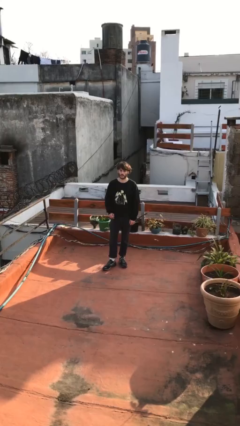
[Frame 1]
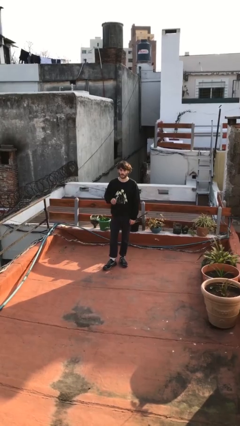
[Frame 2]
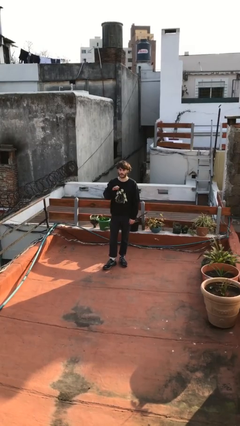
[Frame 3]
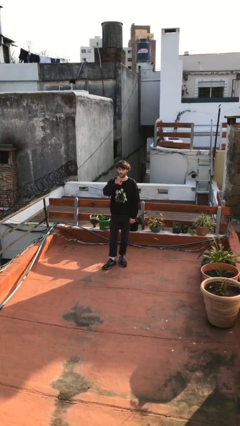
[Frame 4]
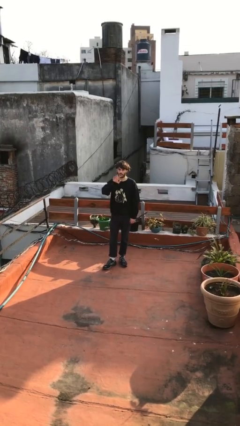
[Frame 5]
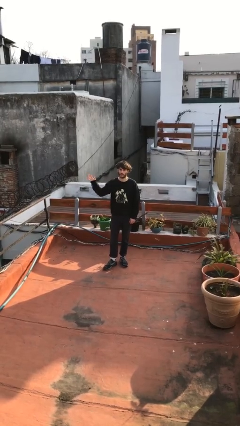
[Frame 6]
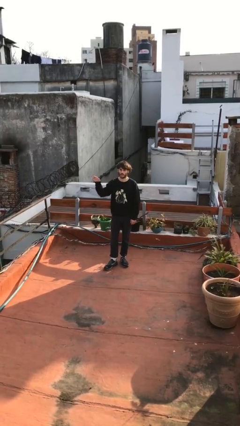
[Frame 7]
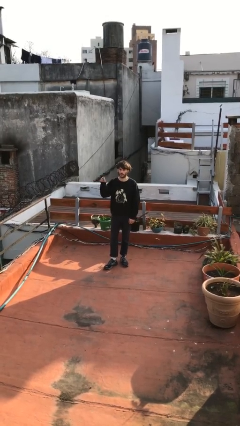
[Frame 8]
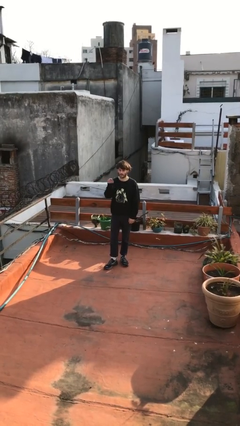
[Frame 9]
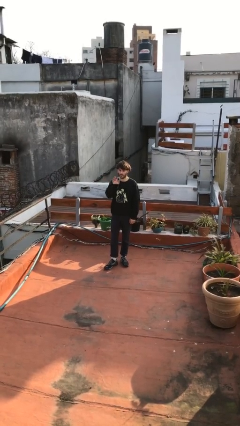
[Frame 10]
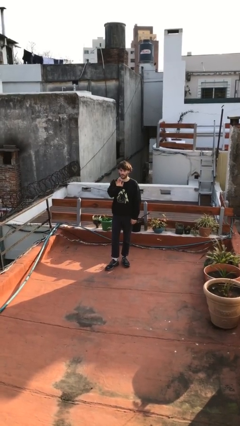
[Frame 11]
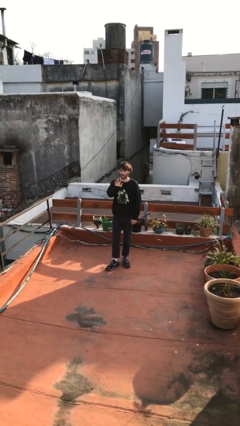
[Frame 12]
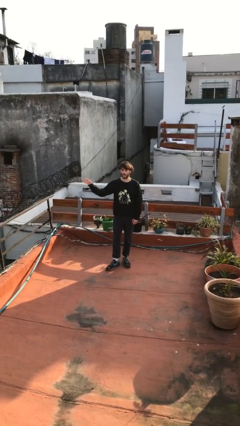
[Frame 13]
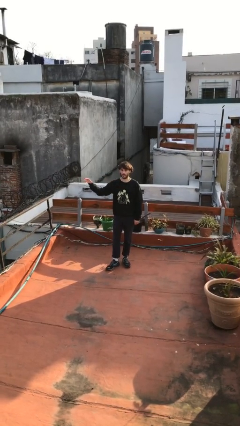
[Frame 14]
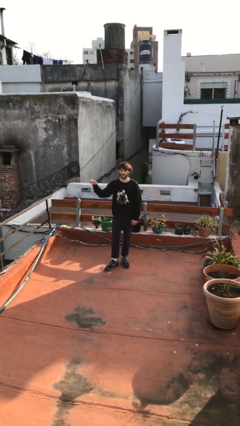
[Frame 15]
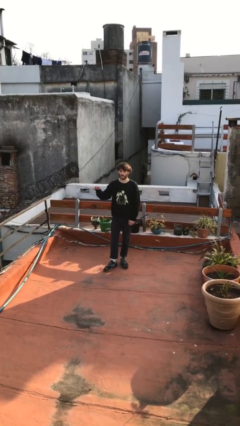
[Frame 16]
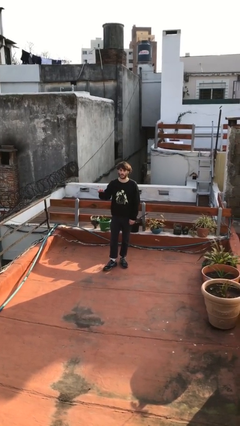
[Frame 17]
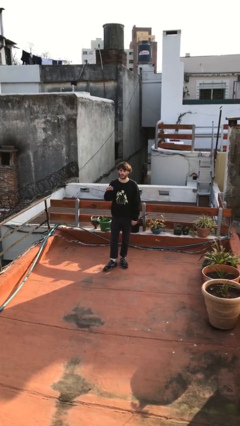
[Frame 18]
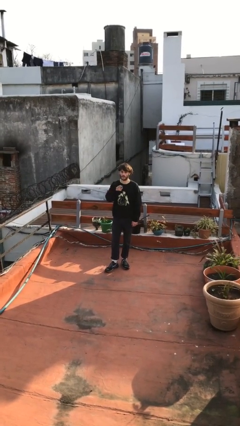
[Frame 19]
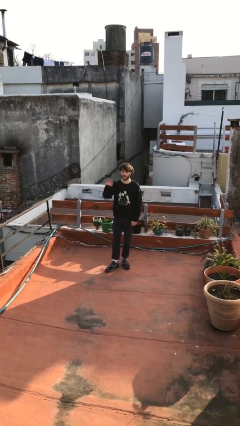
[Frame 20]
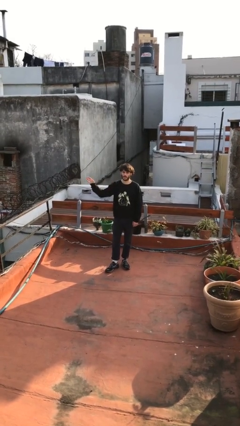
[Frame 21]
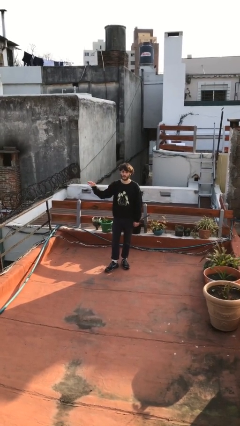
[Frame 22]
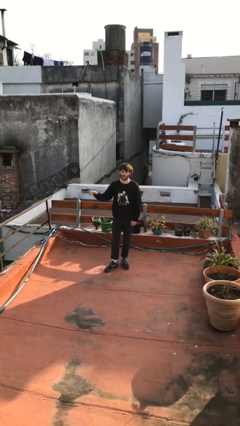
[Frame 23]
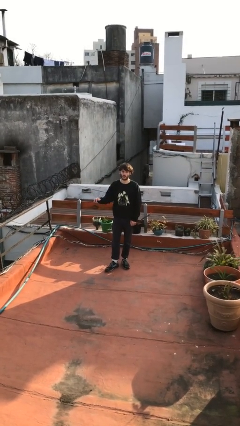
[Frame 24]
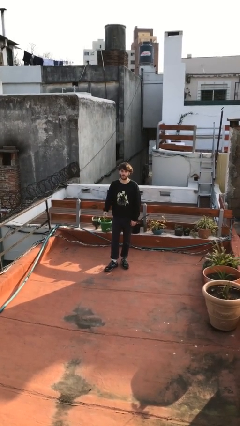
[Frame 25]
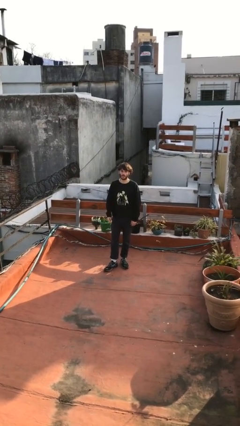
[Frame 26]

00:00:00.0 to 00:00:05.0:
person gestures swipe right

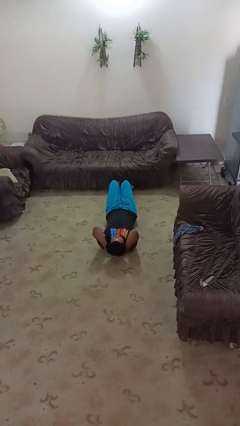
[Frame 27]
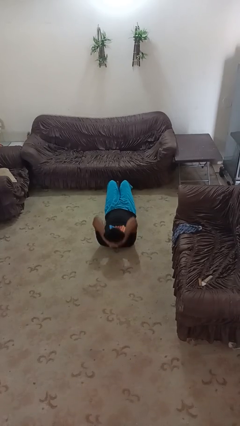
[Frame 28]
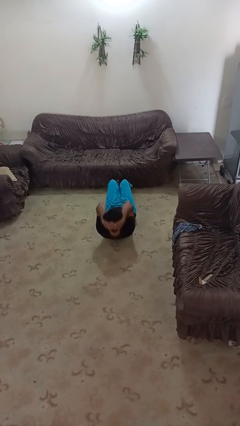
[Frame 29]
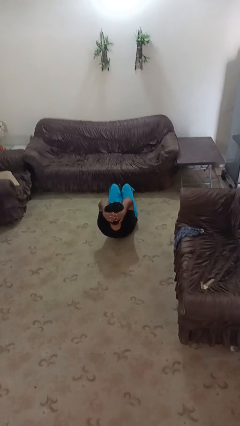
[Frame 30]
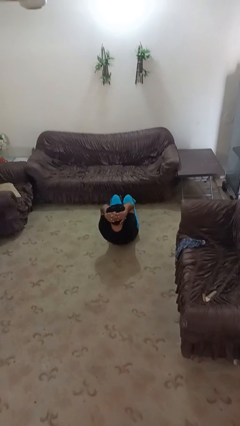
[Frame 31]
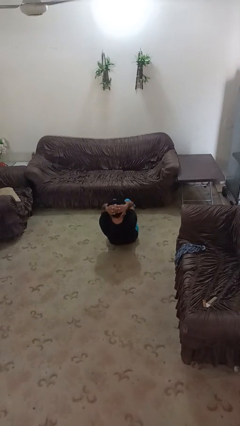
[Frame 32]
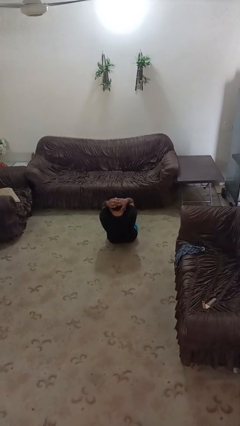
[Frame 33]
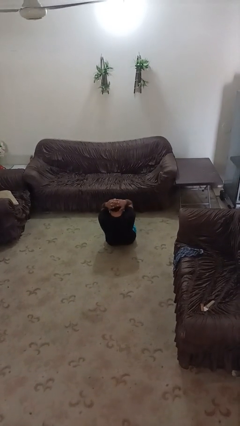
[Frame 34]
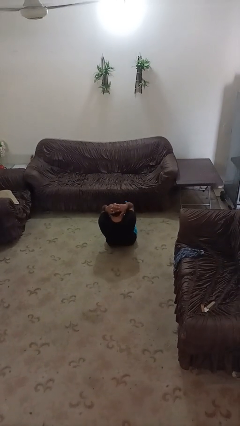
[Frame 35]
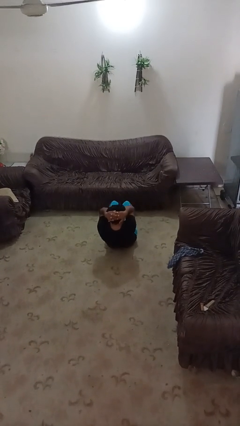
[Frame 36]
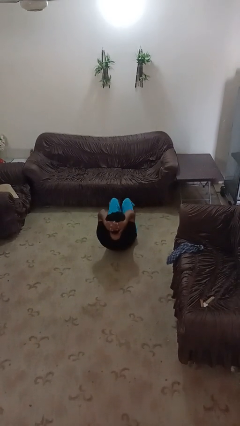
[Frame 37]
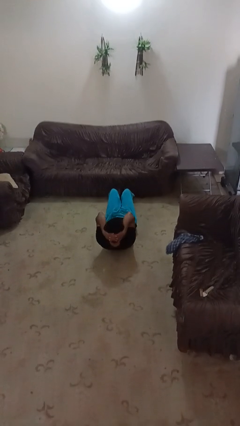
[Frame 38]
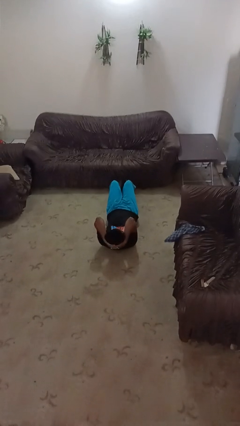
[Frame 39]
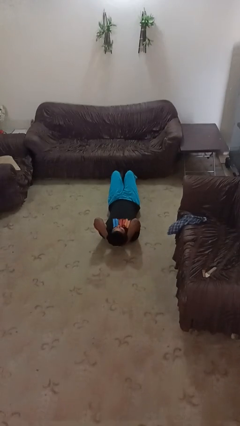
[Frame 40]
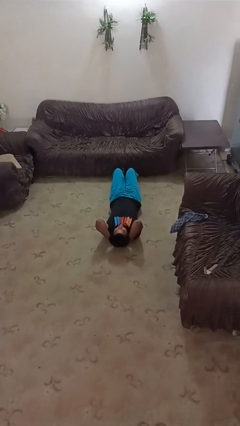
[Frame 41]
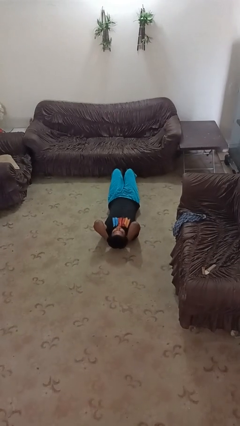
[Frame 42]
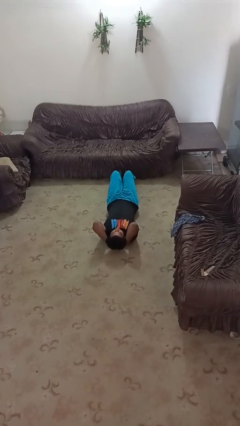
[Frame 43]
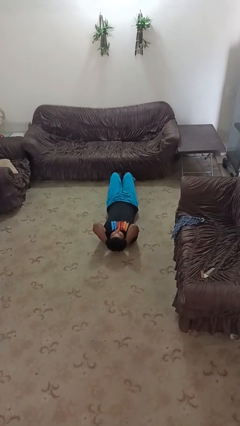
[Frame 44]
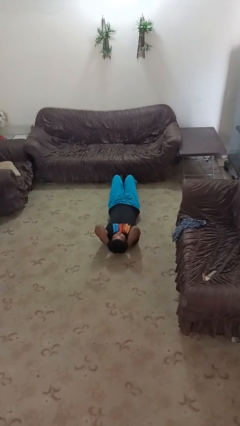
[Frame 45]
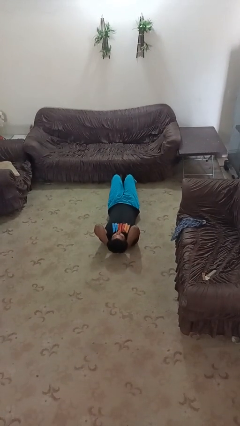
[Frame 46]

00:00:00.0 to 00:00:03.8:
person exercises with situp

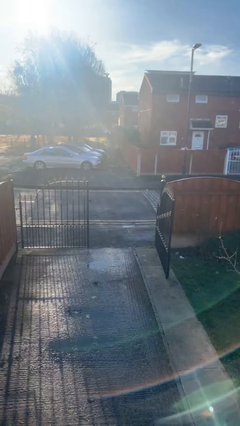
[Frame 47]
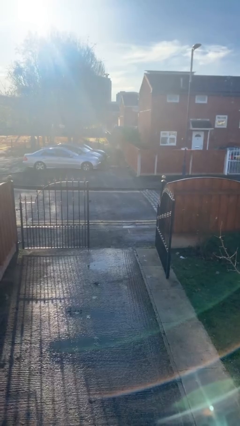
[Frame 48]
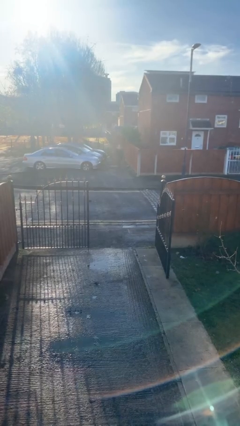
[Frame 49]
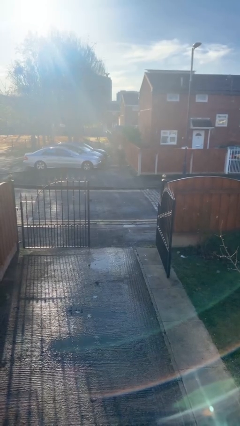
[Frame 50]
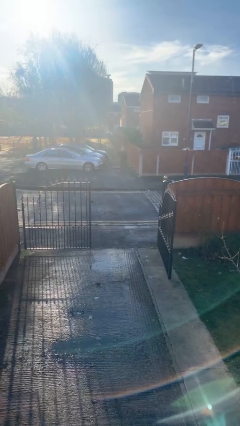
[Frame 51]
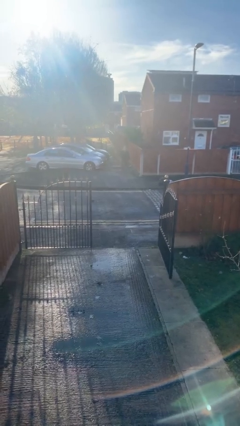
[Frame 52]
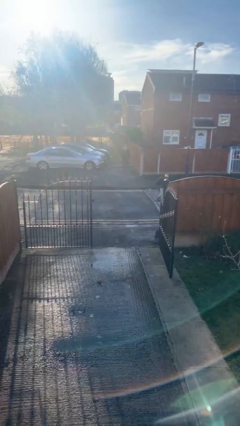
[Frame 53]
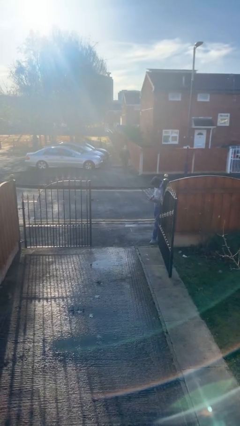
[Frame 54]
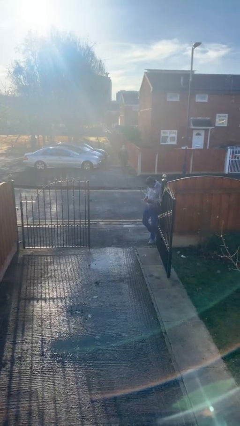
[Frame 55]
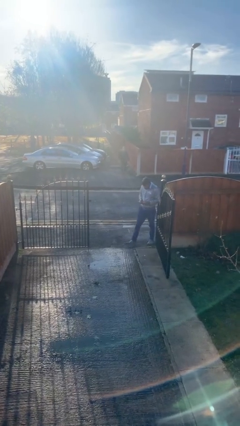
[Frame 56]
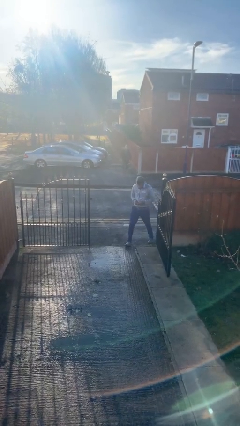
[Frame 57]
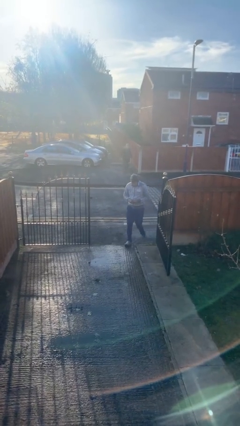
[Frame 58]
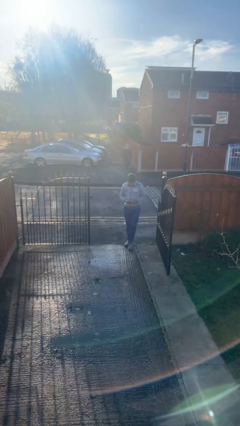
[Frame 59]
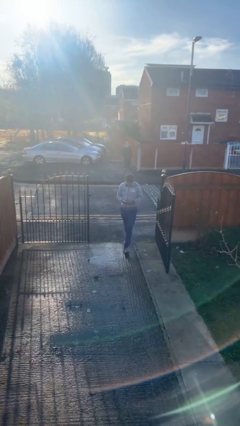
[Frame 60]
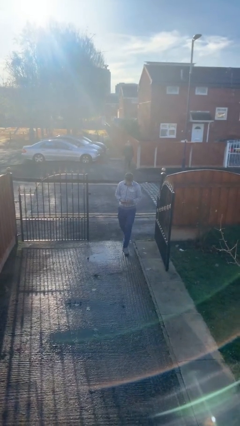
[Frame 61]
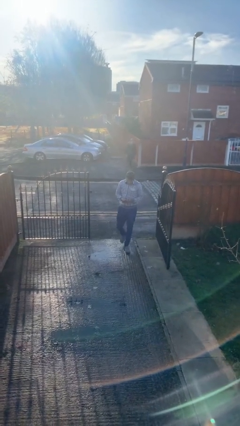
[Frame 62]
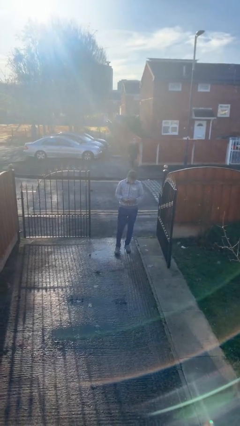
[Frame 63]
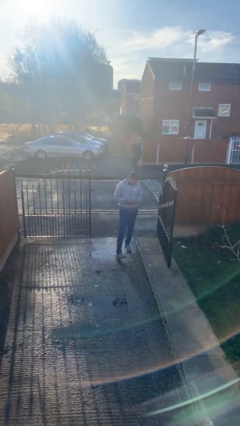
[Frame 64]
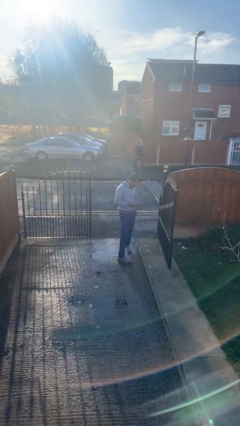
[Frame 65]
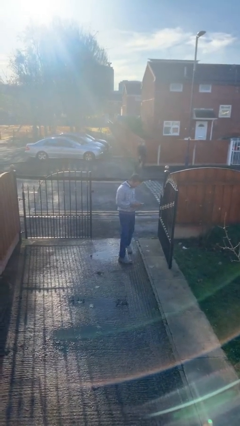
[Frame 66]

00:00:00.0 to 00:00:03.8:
person enters scene through structure

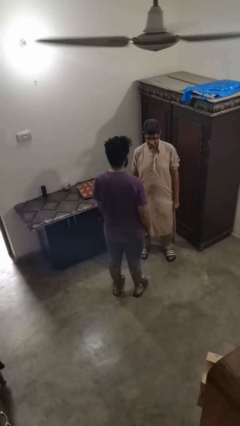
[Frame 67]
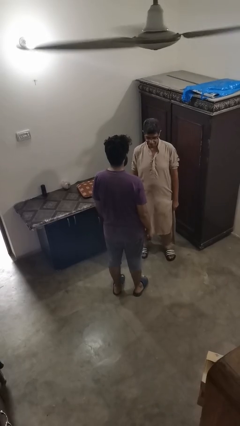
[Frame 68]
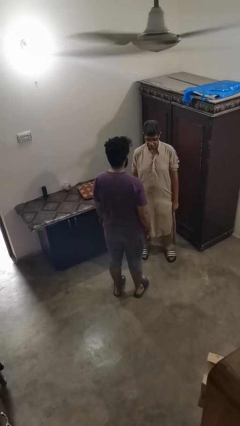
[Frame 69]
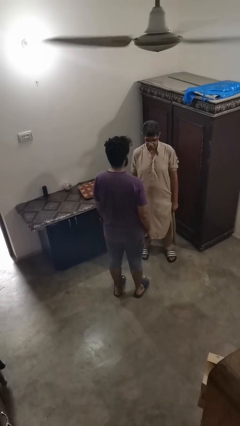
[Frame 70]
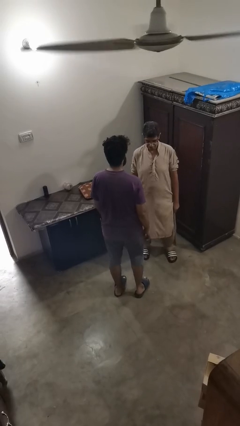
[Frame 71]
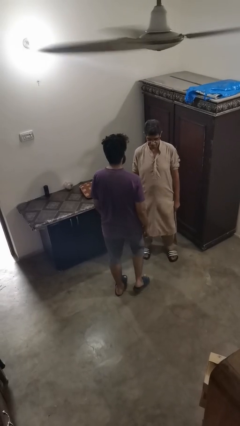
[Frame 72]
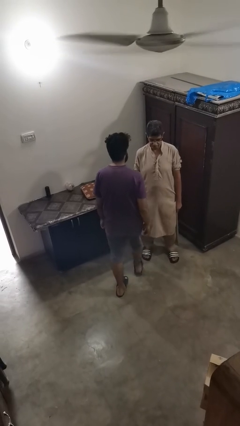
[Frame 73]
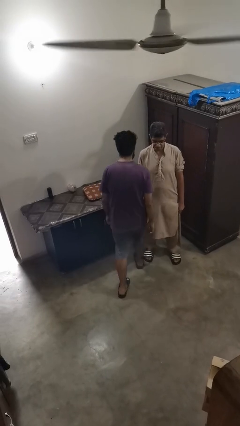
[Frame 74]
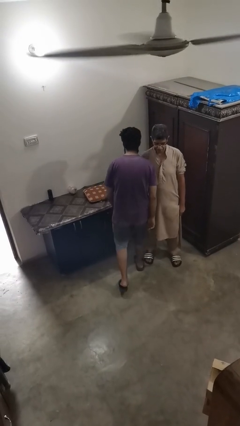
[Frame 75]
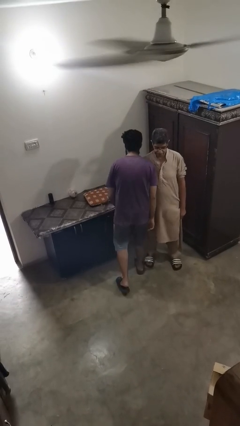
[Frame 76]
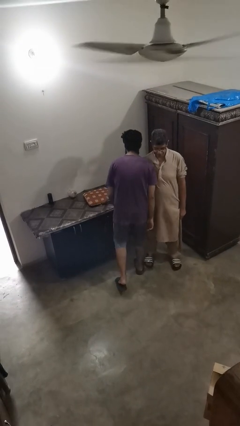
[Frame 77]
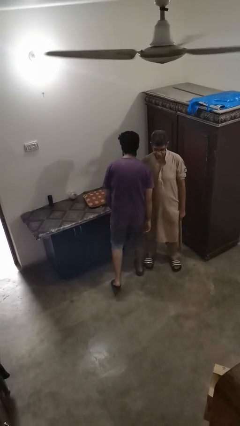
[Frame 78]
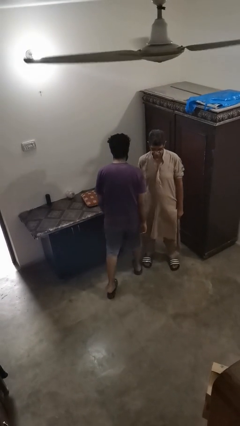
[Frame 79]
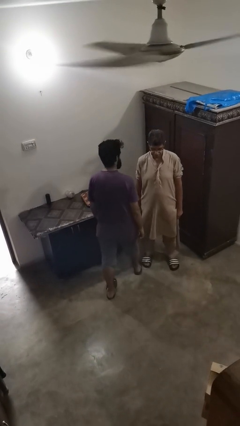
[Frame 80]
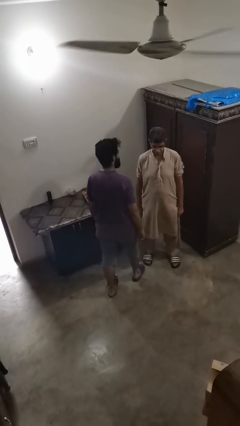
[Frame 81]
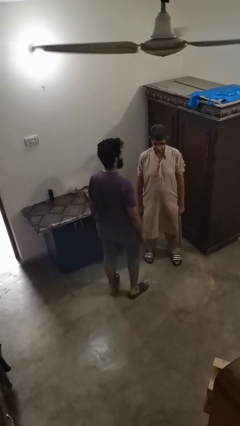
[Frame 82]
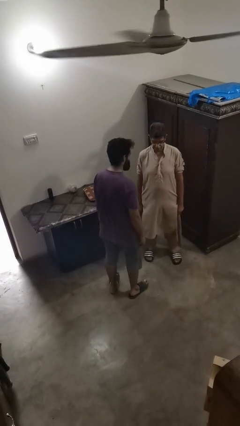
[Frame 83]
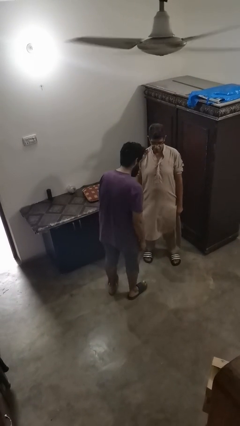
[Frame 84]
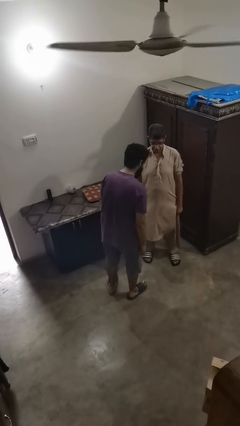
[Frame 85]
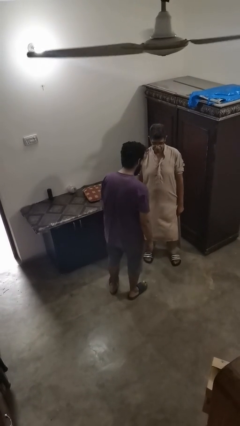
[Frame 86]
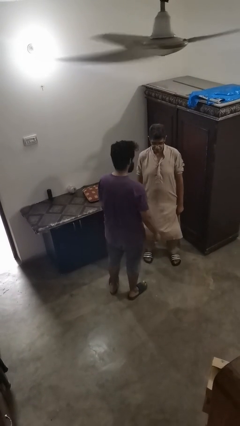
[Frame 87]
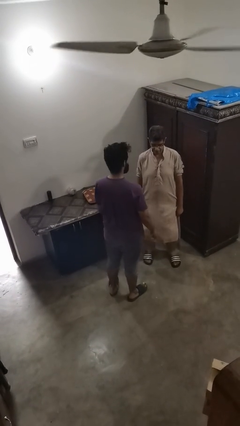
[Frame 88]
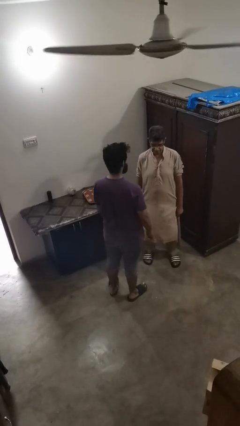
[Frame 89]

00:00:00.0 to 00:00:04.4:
person bumps into person

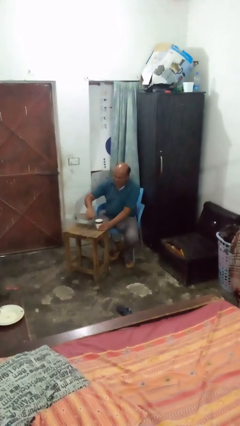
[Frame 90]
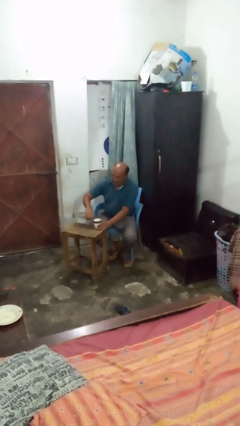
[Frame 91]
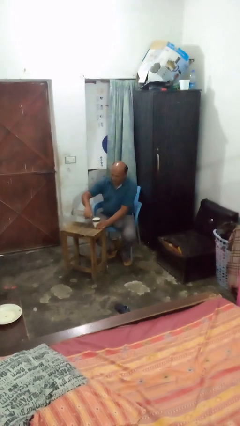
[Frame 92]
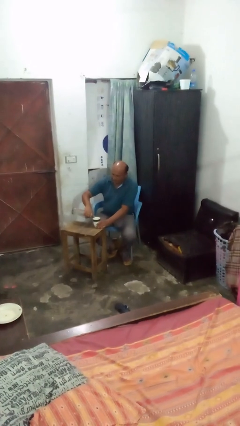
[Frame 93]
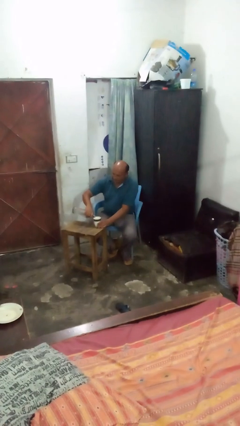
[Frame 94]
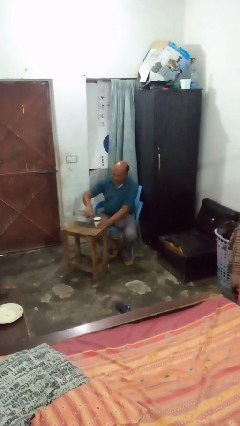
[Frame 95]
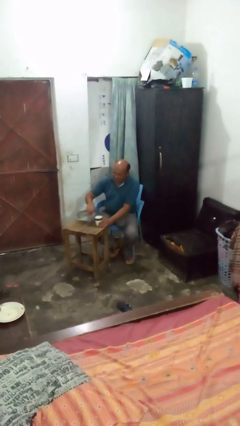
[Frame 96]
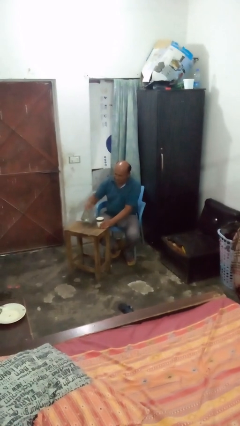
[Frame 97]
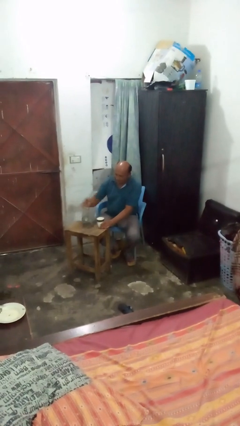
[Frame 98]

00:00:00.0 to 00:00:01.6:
person pours liquid into cup
